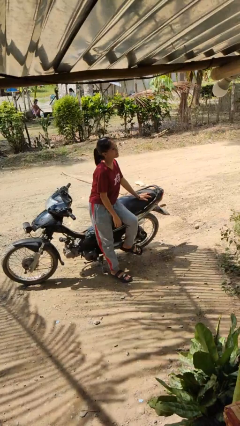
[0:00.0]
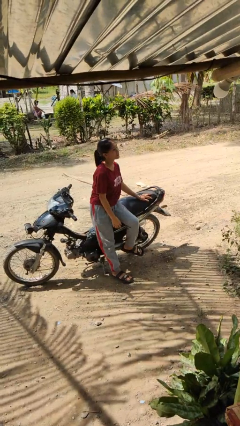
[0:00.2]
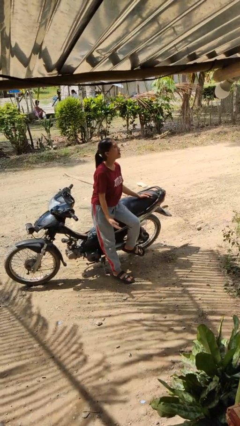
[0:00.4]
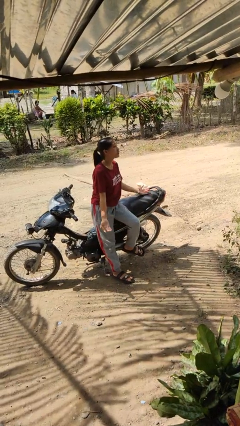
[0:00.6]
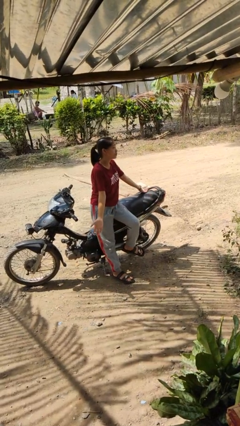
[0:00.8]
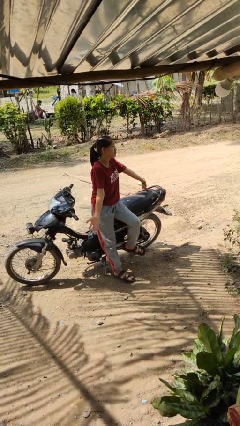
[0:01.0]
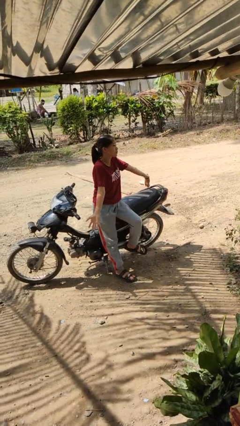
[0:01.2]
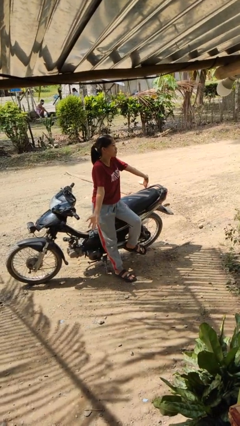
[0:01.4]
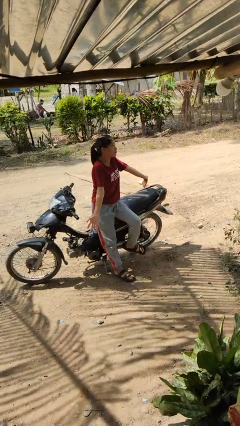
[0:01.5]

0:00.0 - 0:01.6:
person shrugs

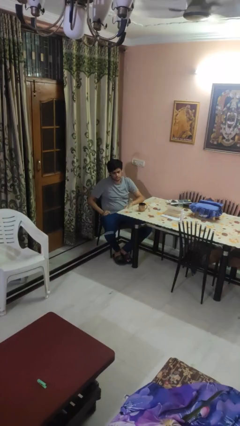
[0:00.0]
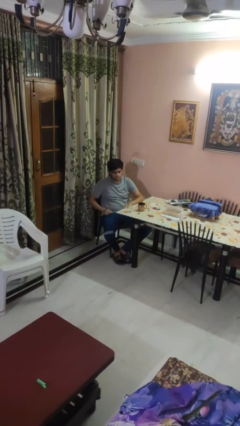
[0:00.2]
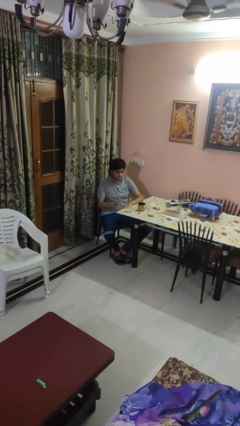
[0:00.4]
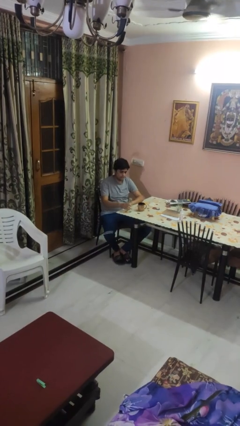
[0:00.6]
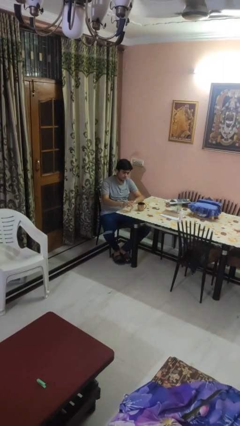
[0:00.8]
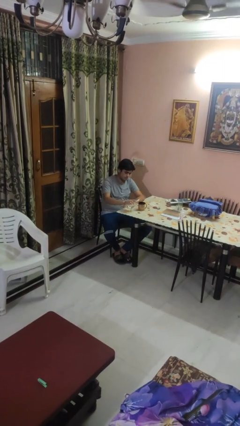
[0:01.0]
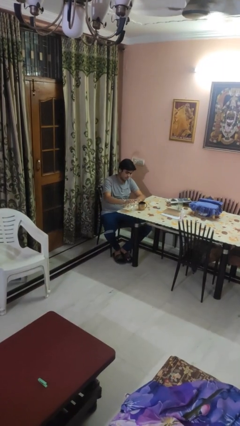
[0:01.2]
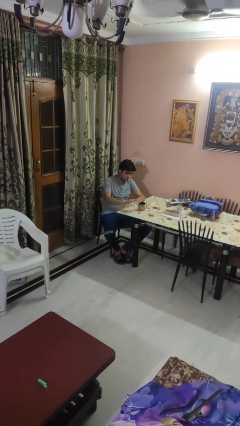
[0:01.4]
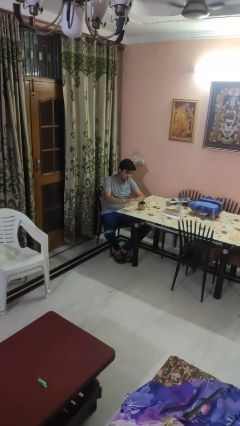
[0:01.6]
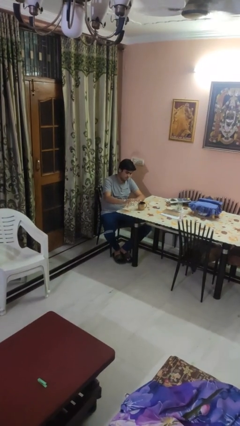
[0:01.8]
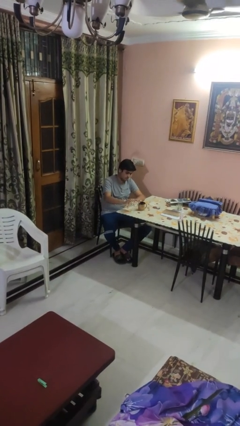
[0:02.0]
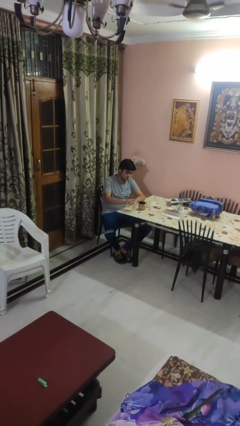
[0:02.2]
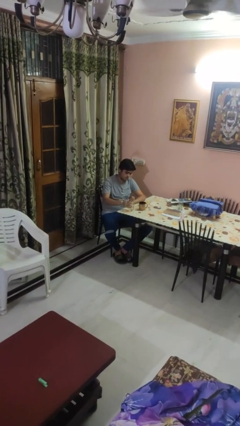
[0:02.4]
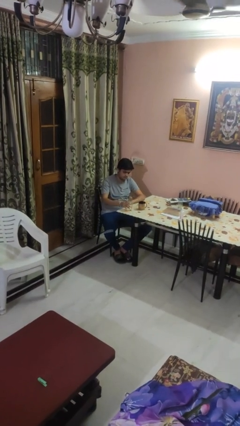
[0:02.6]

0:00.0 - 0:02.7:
person pours liquid into cup

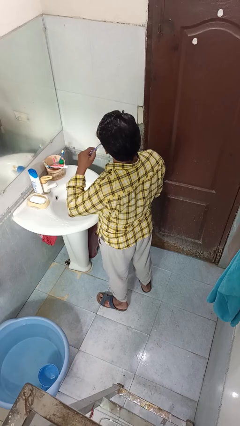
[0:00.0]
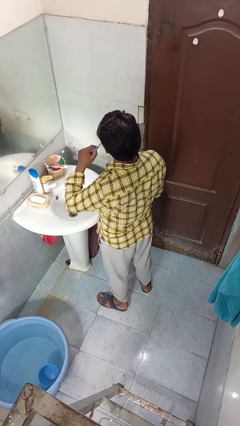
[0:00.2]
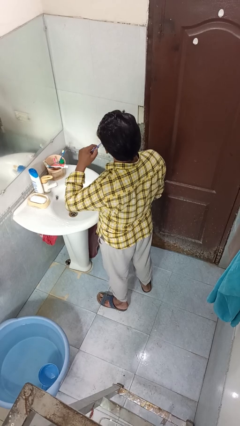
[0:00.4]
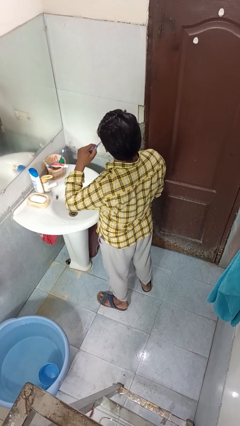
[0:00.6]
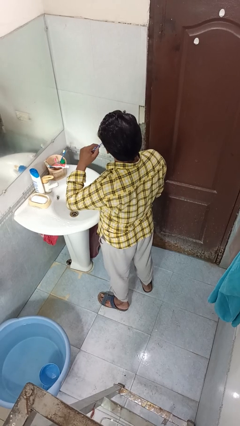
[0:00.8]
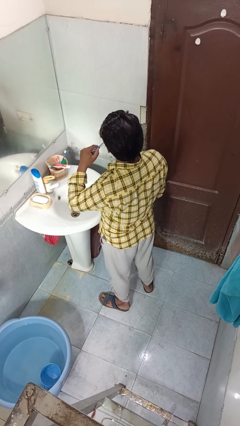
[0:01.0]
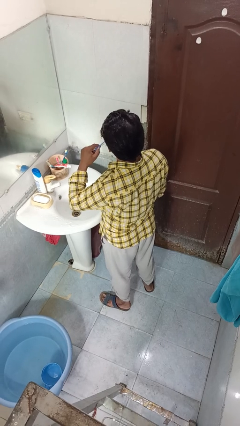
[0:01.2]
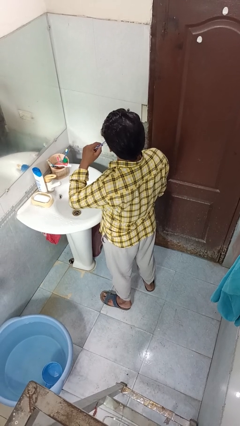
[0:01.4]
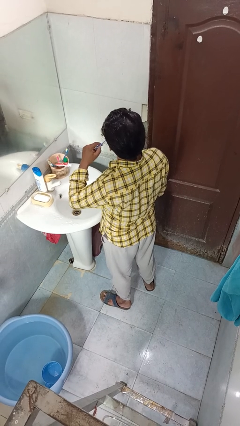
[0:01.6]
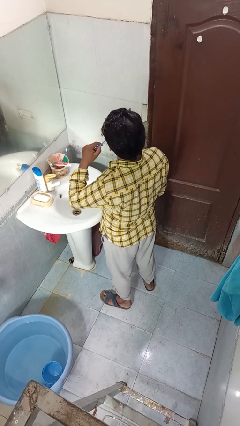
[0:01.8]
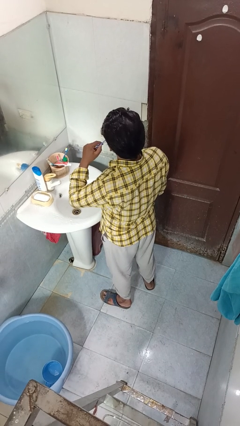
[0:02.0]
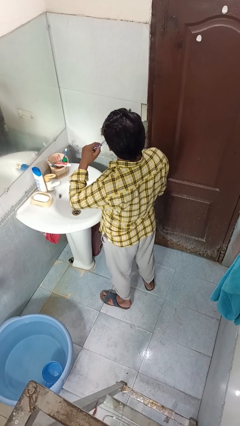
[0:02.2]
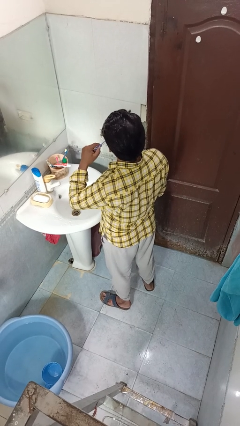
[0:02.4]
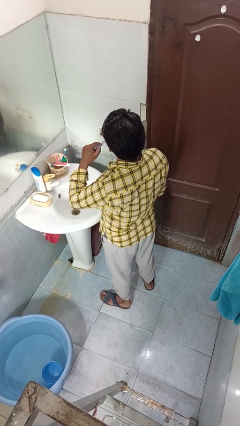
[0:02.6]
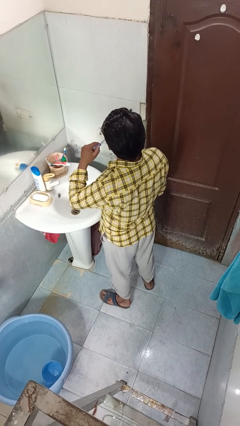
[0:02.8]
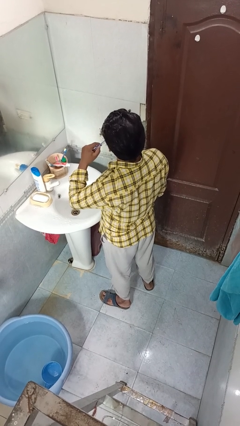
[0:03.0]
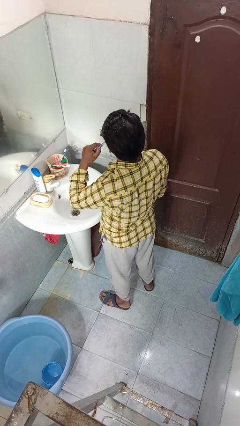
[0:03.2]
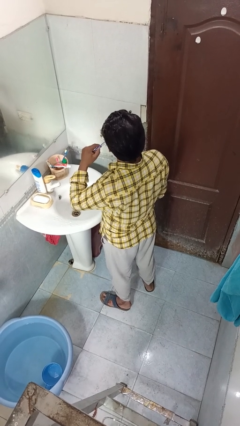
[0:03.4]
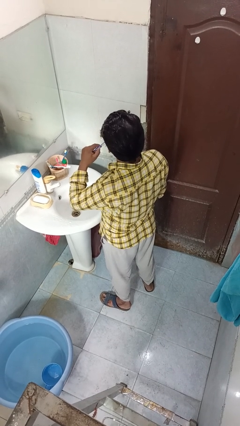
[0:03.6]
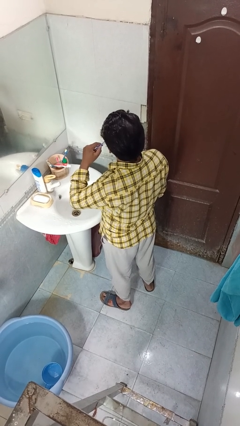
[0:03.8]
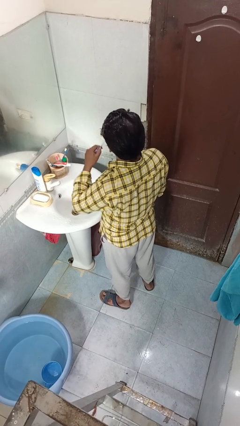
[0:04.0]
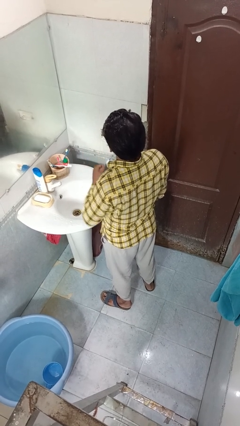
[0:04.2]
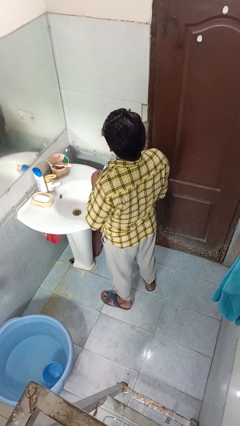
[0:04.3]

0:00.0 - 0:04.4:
person brushes teeth

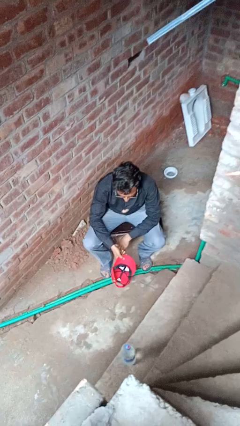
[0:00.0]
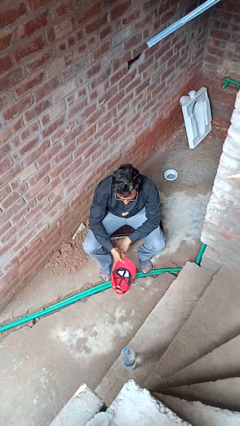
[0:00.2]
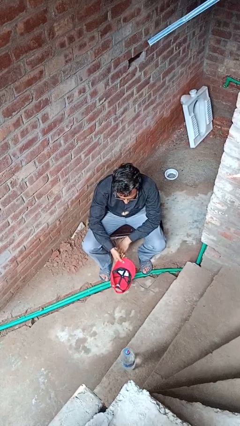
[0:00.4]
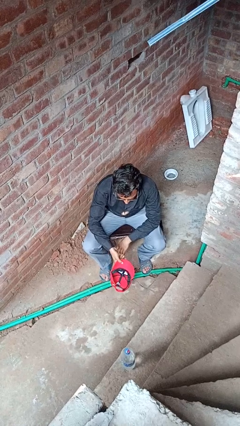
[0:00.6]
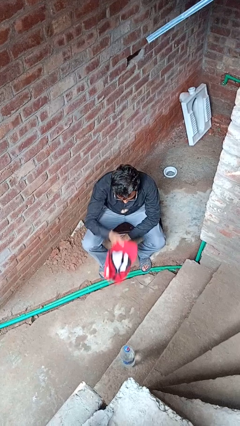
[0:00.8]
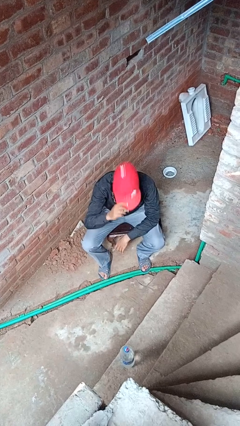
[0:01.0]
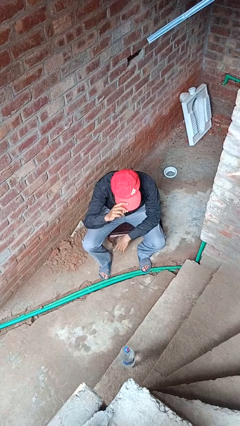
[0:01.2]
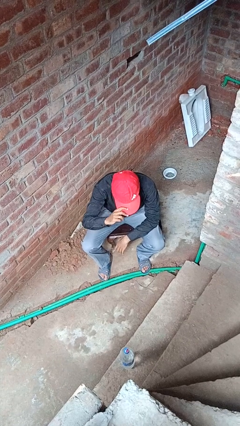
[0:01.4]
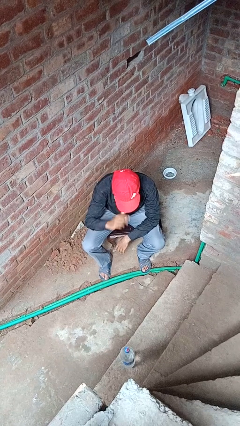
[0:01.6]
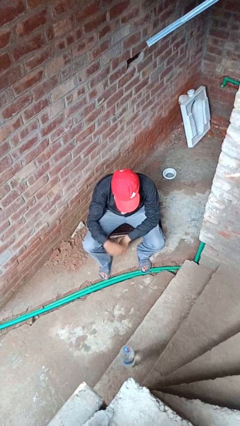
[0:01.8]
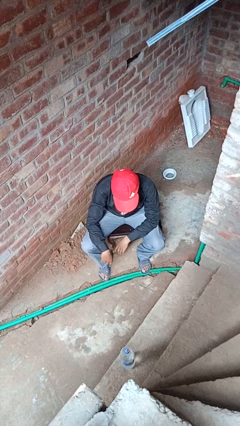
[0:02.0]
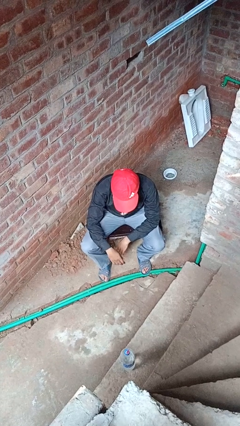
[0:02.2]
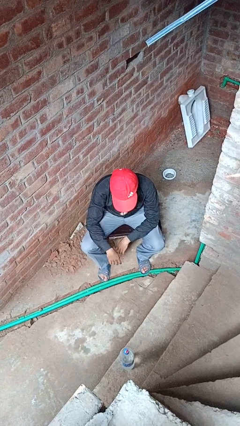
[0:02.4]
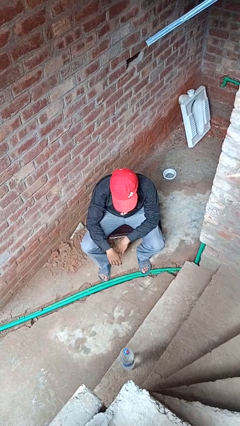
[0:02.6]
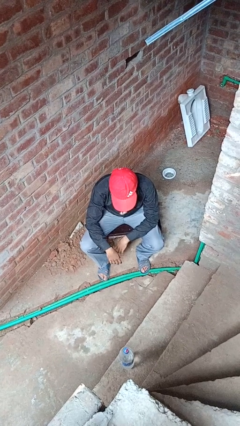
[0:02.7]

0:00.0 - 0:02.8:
person puts on hat

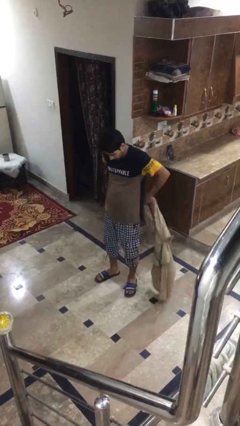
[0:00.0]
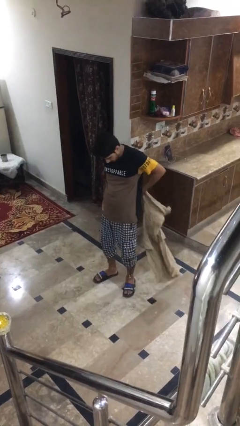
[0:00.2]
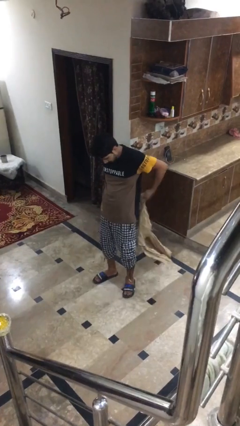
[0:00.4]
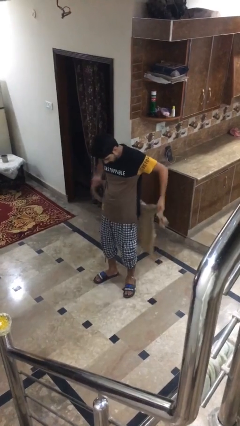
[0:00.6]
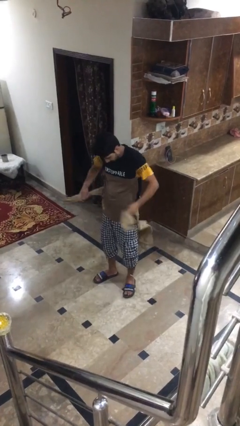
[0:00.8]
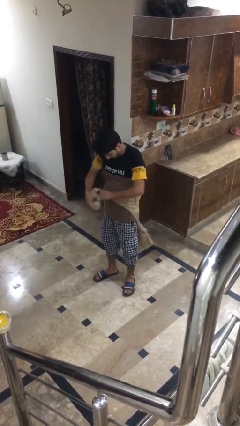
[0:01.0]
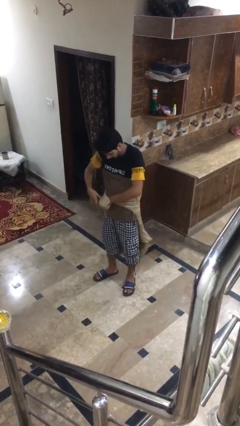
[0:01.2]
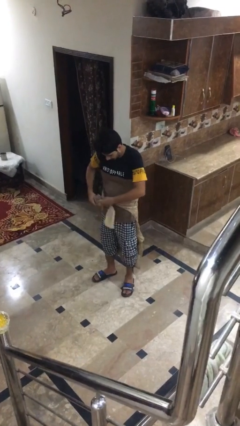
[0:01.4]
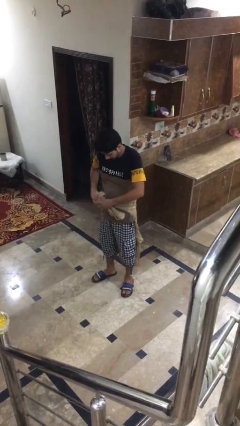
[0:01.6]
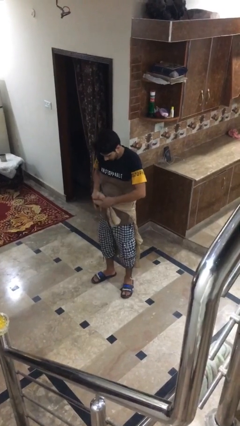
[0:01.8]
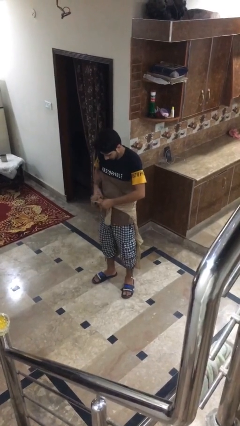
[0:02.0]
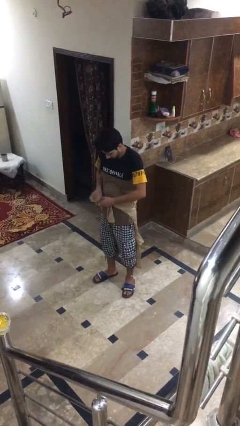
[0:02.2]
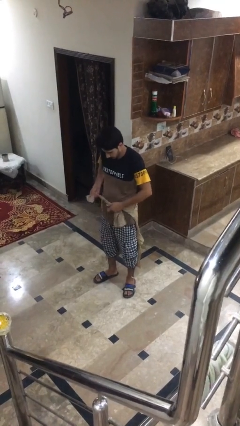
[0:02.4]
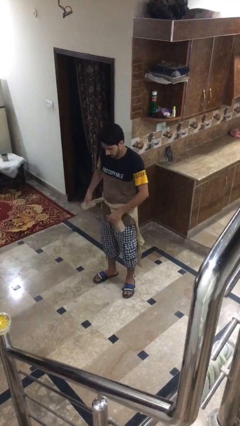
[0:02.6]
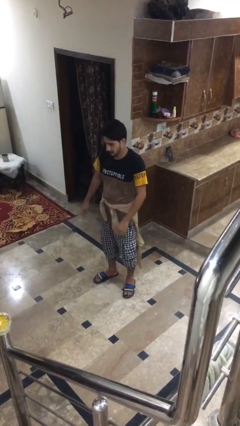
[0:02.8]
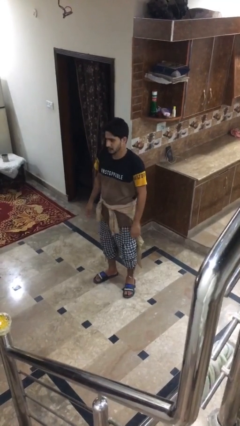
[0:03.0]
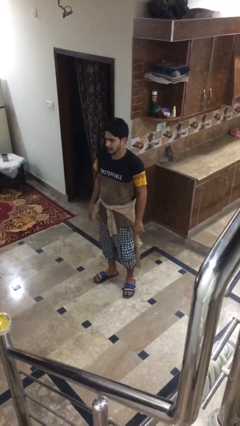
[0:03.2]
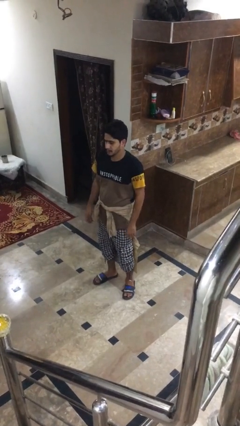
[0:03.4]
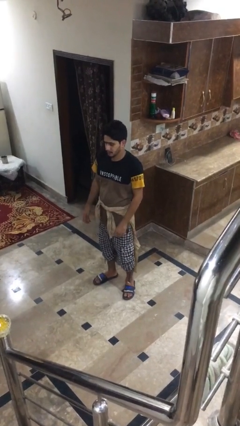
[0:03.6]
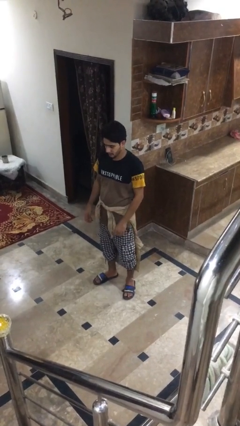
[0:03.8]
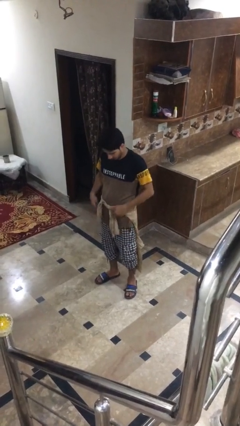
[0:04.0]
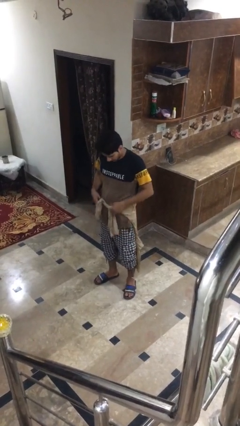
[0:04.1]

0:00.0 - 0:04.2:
person ties jacket around waist

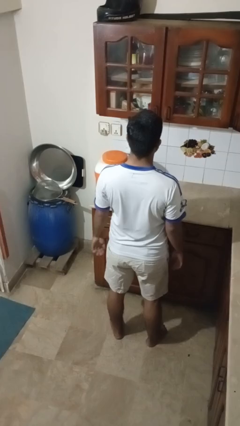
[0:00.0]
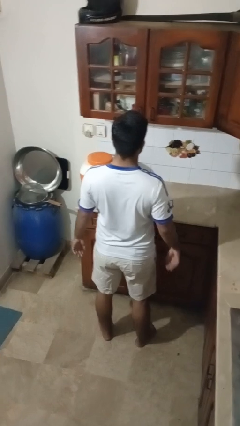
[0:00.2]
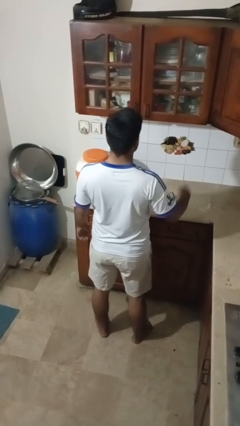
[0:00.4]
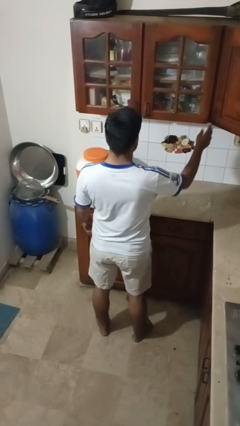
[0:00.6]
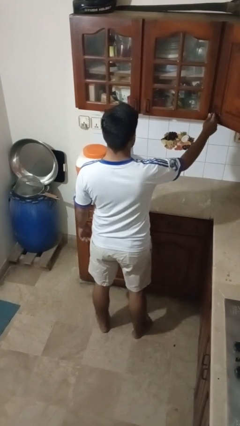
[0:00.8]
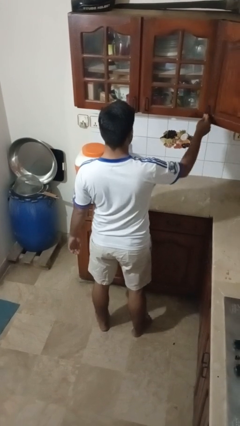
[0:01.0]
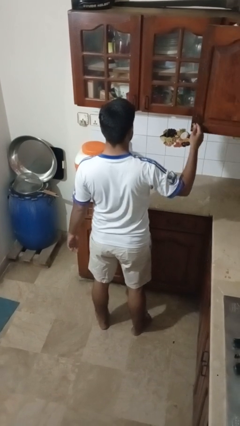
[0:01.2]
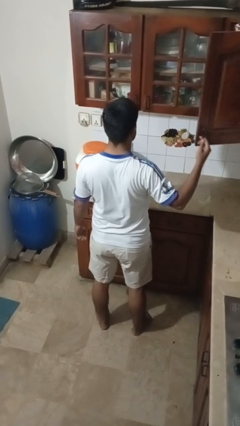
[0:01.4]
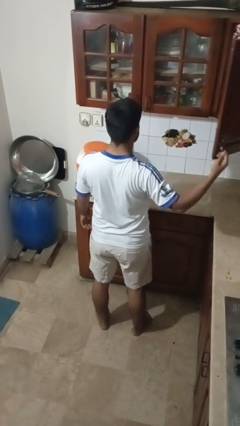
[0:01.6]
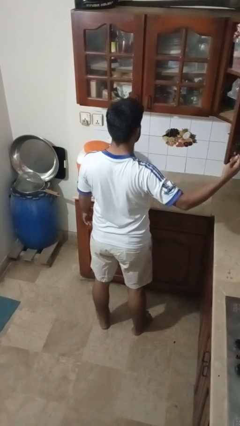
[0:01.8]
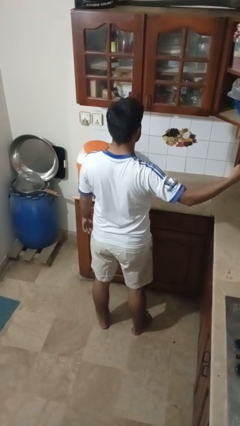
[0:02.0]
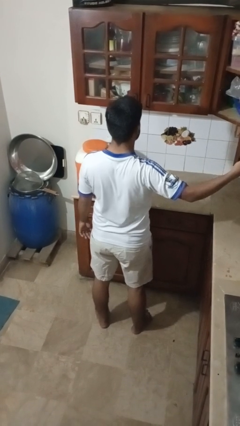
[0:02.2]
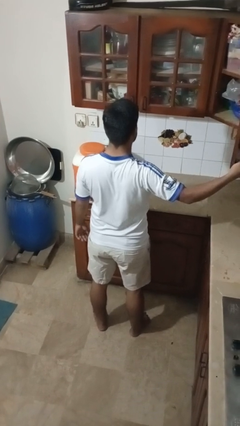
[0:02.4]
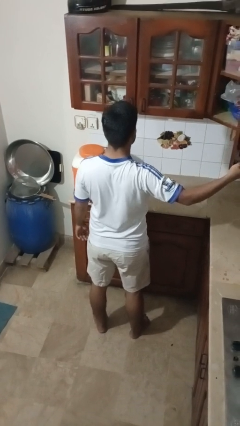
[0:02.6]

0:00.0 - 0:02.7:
person opens cabinet
